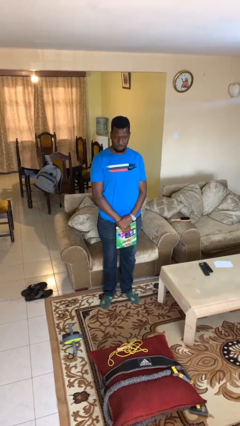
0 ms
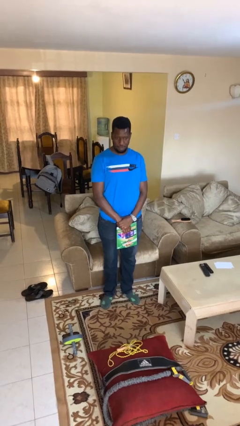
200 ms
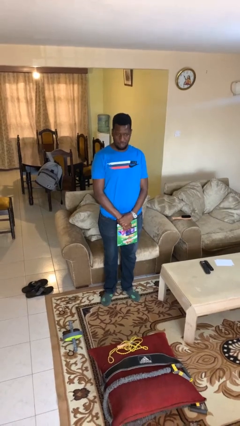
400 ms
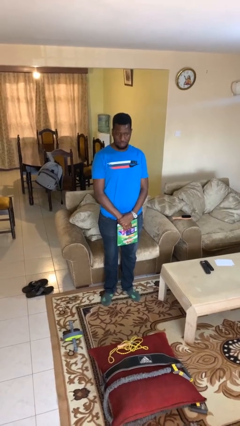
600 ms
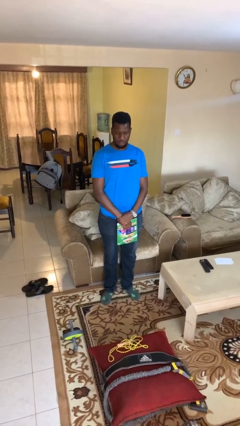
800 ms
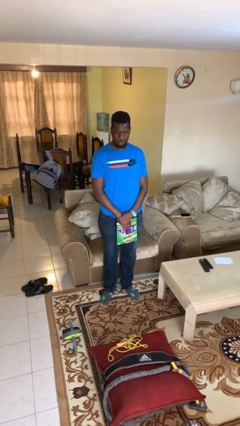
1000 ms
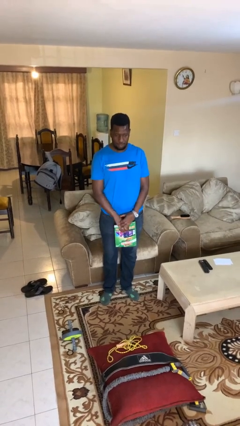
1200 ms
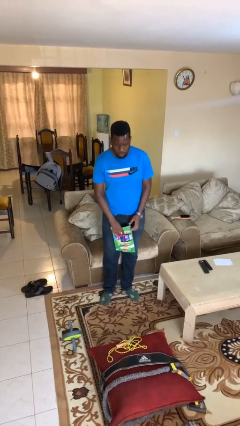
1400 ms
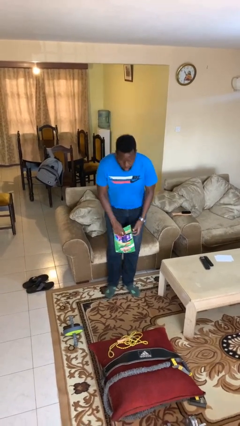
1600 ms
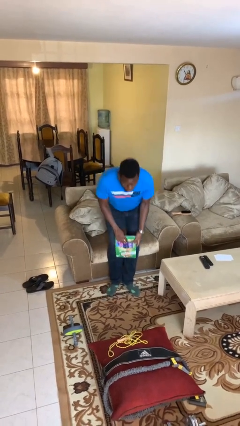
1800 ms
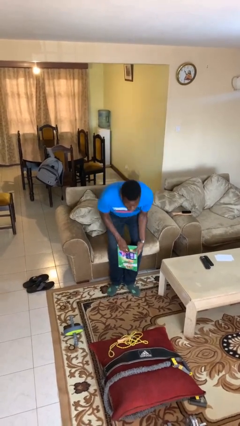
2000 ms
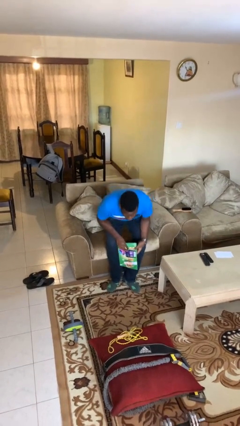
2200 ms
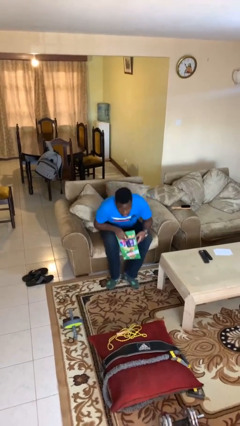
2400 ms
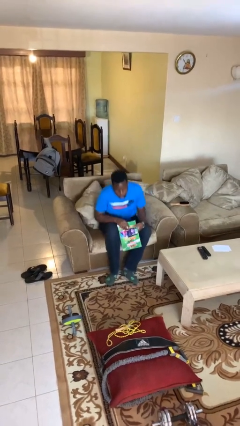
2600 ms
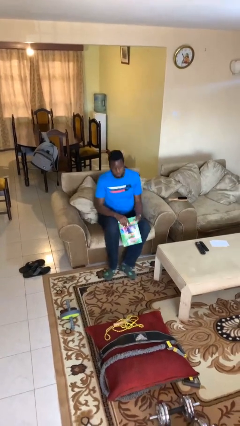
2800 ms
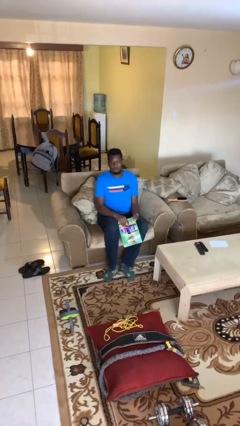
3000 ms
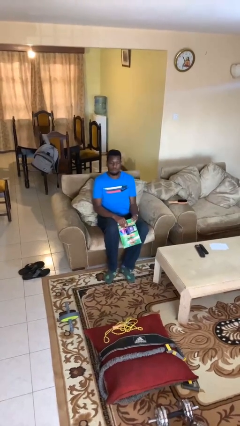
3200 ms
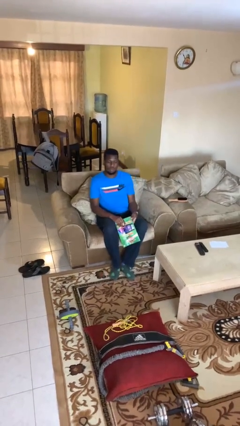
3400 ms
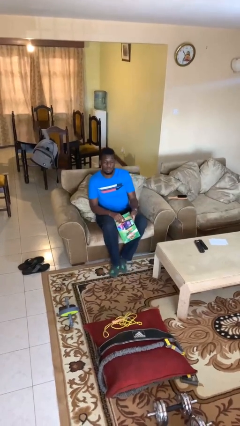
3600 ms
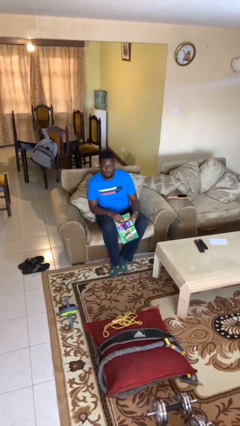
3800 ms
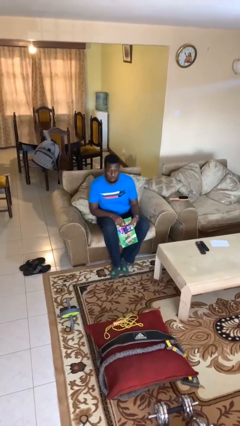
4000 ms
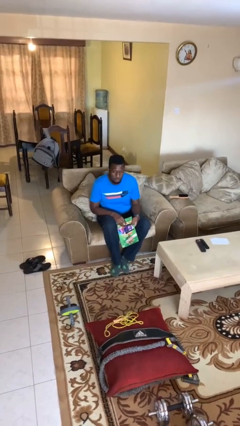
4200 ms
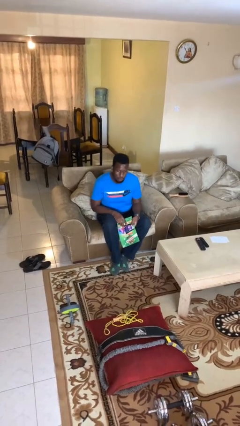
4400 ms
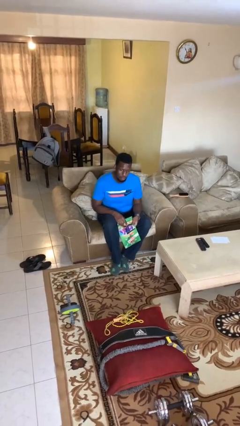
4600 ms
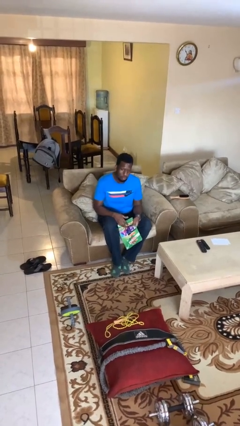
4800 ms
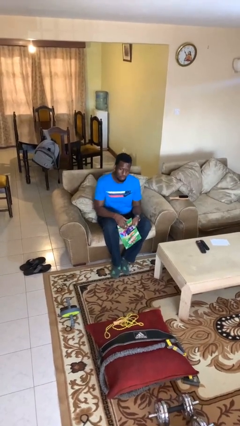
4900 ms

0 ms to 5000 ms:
person sits down

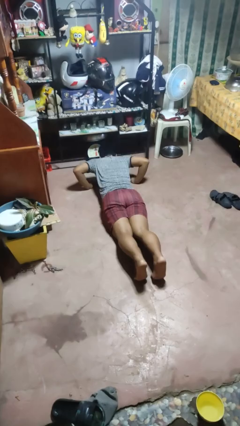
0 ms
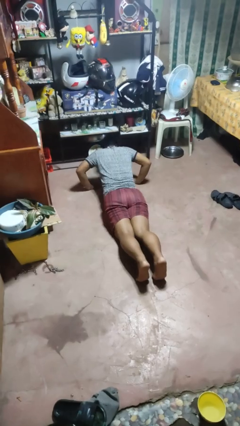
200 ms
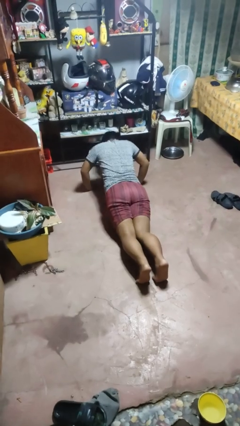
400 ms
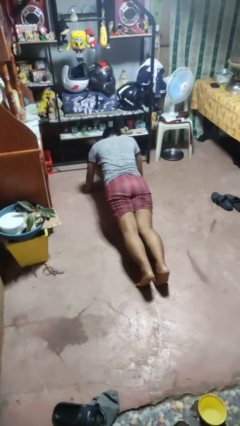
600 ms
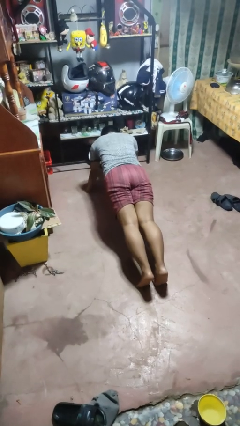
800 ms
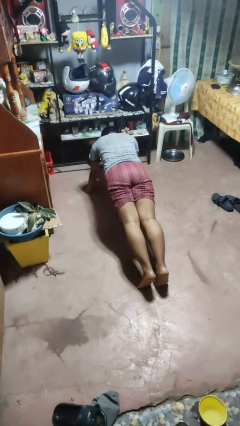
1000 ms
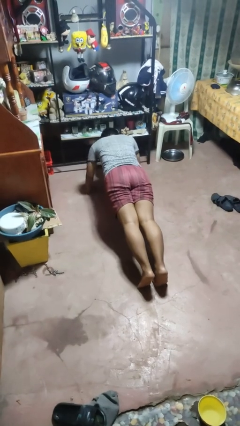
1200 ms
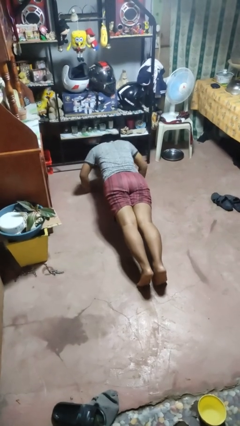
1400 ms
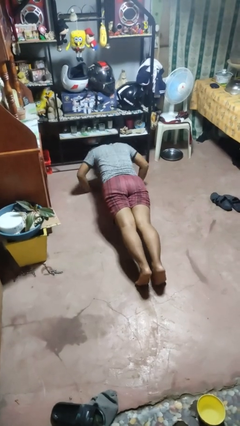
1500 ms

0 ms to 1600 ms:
person exercises with pushup

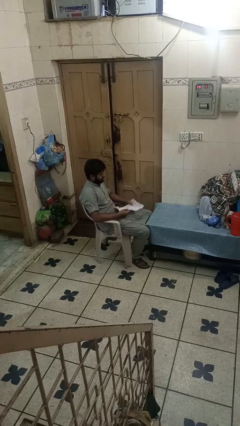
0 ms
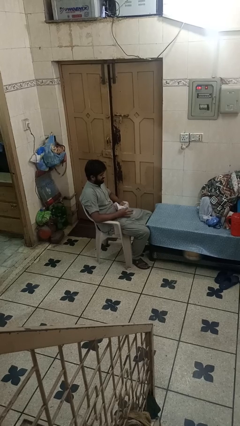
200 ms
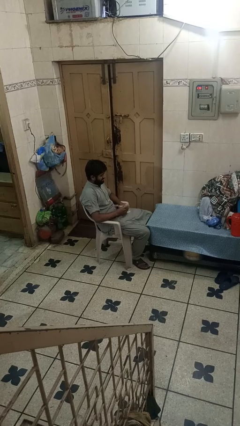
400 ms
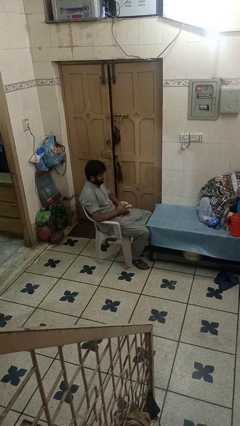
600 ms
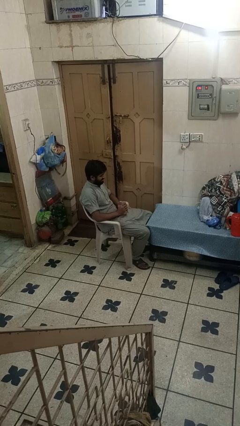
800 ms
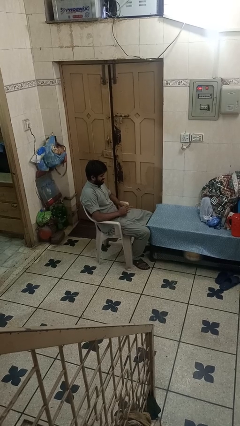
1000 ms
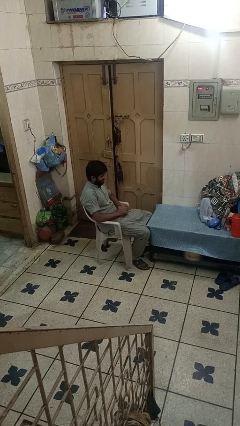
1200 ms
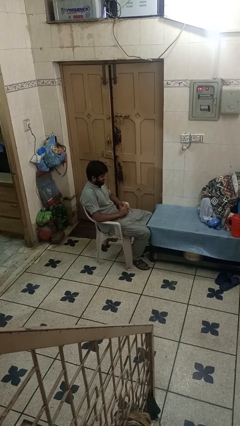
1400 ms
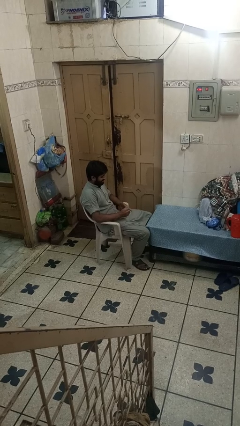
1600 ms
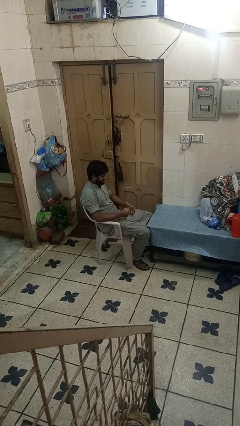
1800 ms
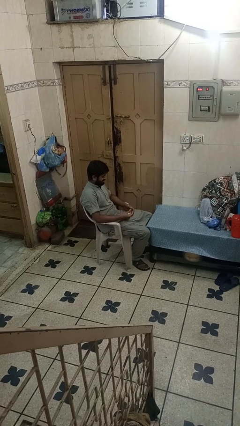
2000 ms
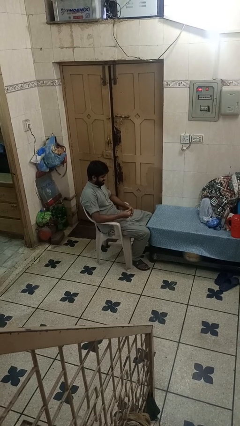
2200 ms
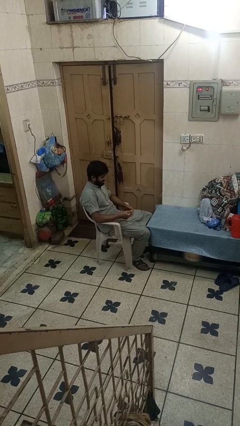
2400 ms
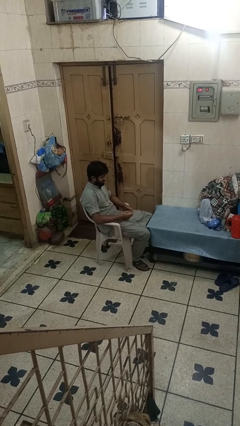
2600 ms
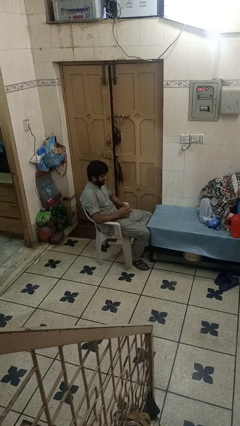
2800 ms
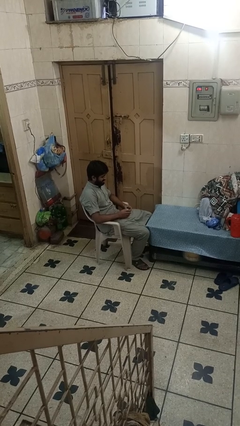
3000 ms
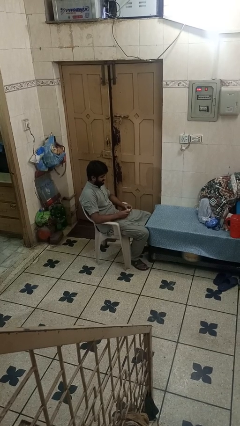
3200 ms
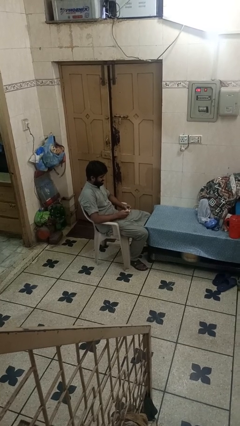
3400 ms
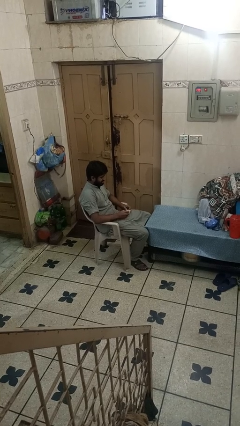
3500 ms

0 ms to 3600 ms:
person crumples paper

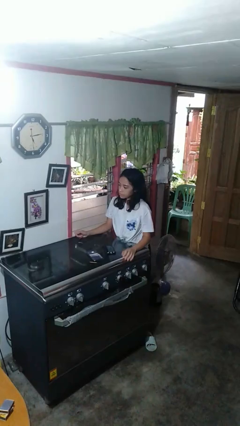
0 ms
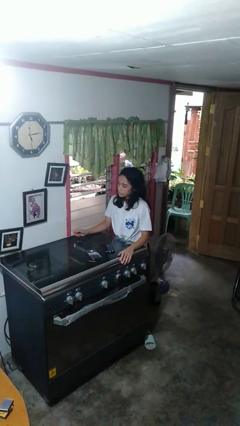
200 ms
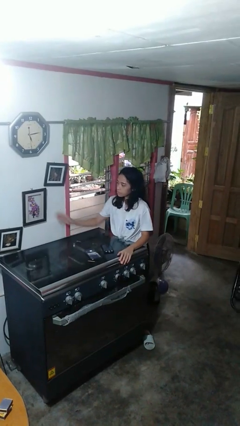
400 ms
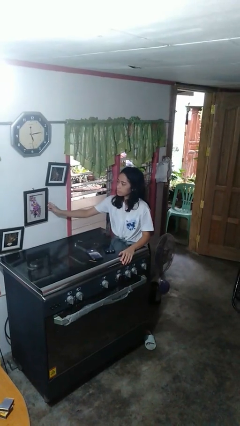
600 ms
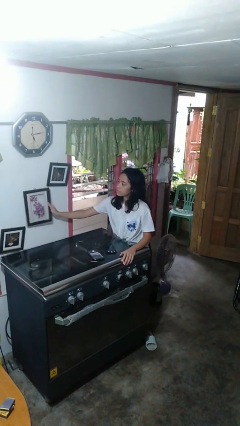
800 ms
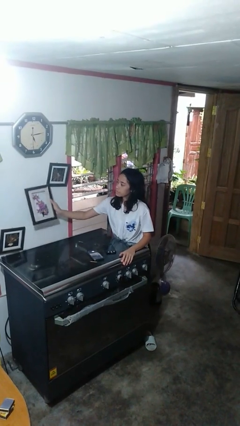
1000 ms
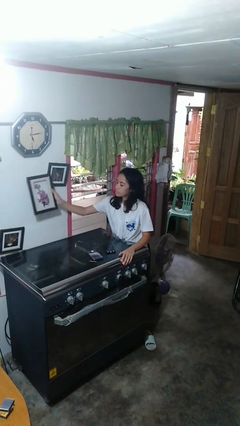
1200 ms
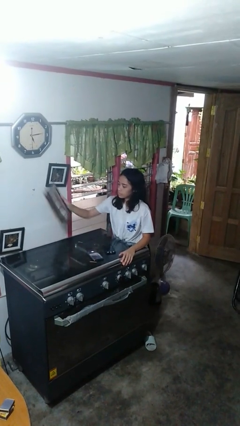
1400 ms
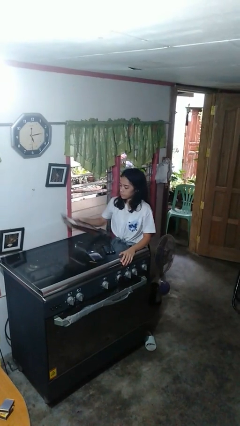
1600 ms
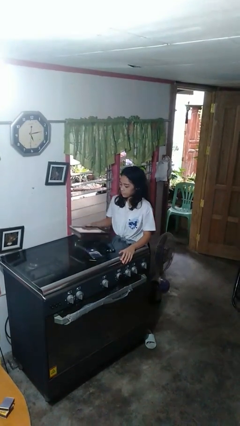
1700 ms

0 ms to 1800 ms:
person takes down picture frame

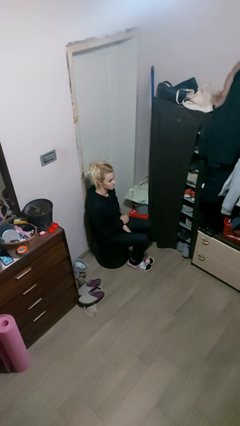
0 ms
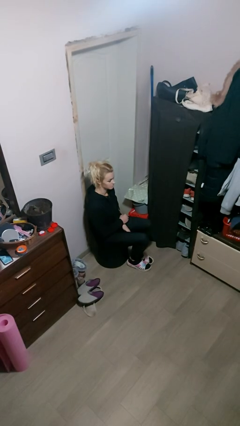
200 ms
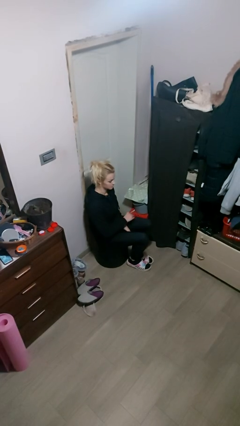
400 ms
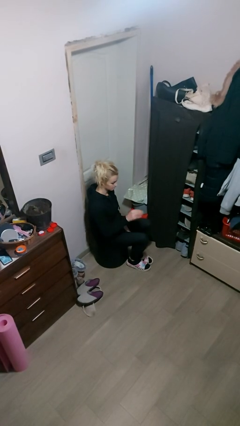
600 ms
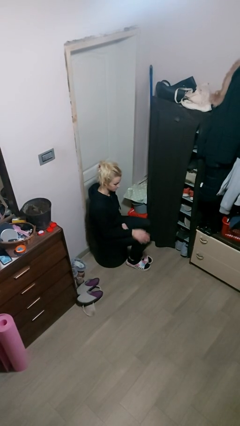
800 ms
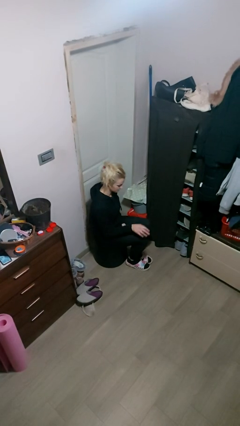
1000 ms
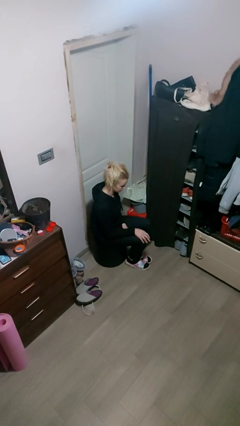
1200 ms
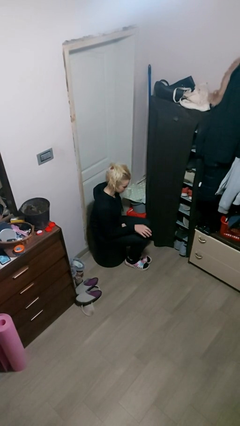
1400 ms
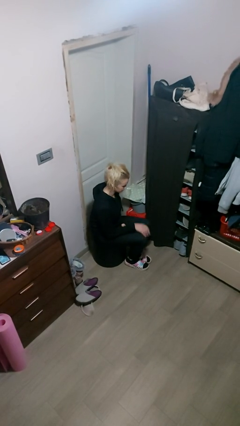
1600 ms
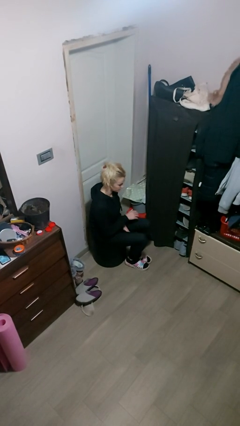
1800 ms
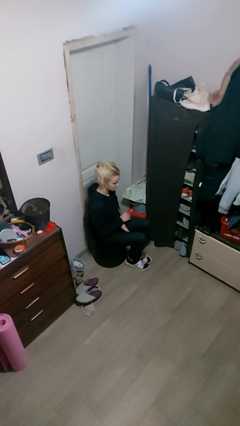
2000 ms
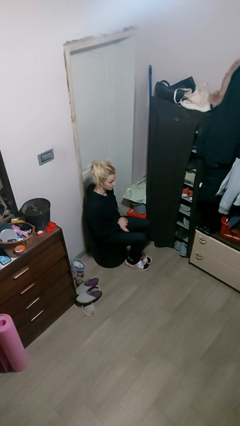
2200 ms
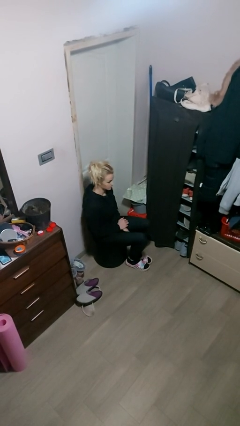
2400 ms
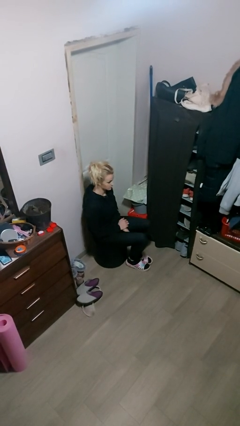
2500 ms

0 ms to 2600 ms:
person slaps hands on thighs

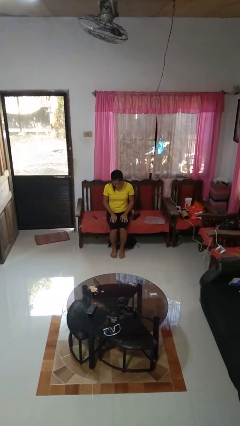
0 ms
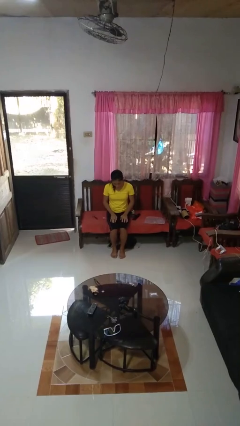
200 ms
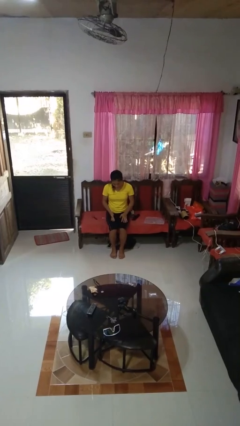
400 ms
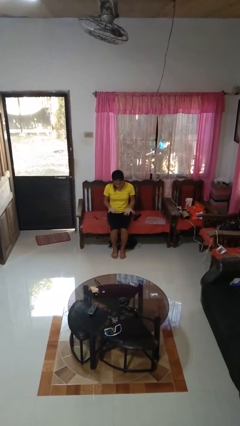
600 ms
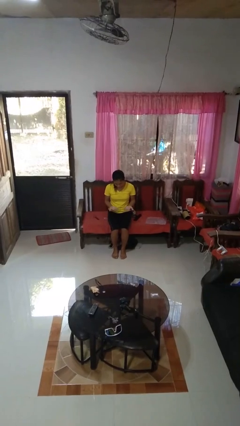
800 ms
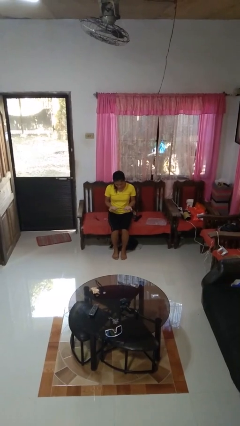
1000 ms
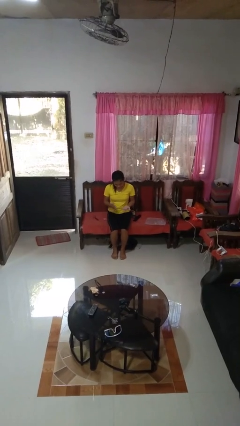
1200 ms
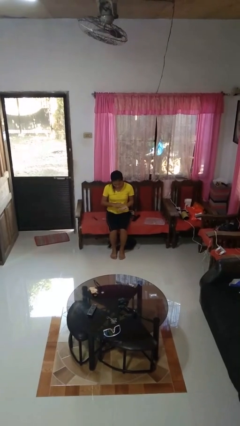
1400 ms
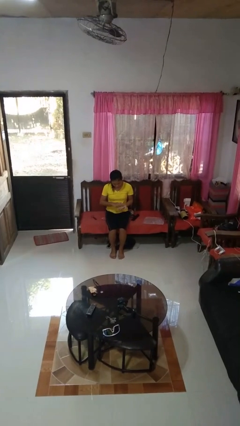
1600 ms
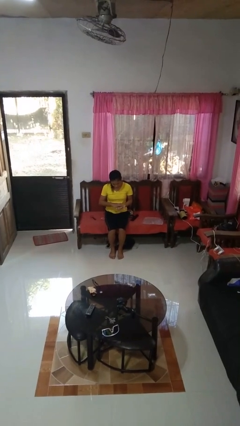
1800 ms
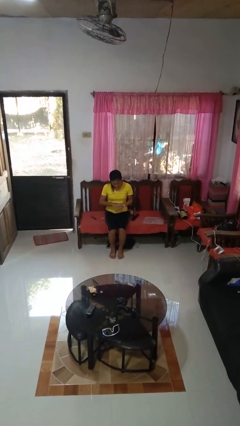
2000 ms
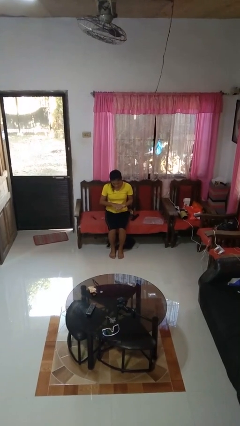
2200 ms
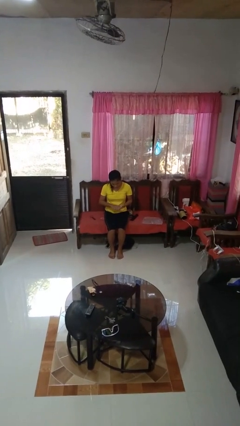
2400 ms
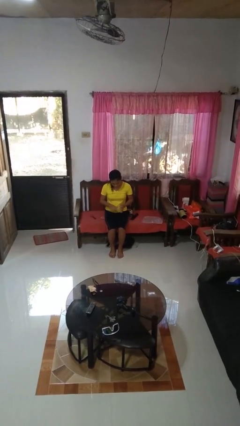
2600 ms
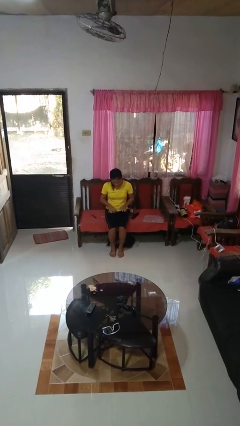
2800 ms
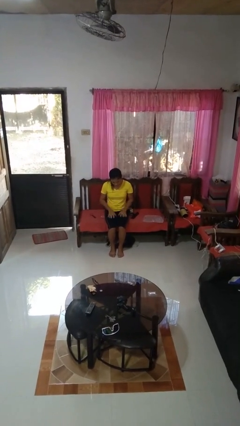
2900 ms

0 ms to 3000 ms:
person looks at hands in lap
